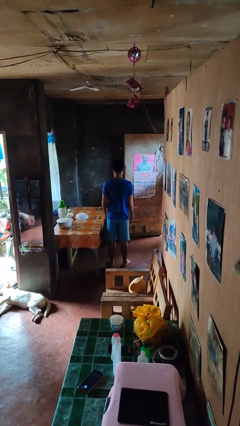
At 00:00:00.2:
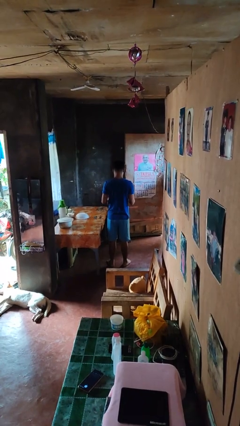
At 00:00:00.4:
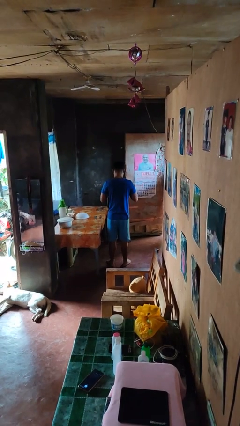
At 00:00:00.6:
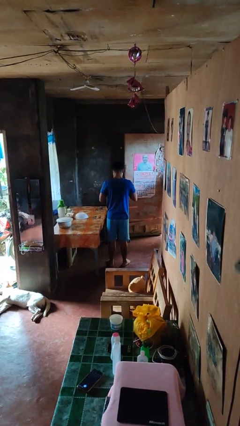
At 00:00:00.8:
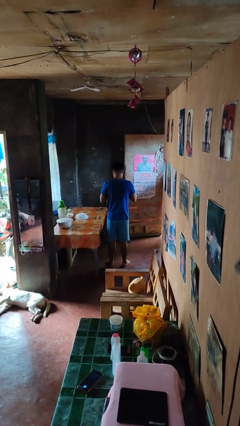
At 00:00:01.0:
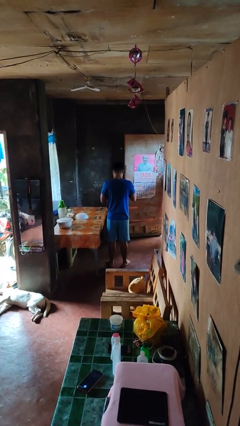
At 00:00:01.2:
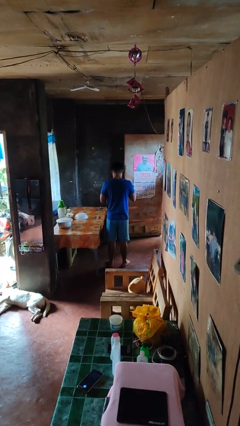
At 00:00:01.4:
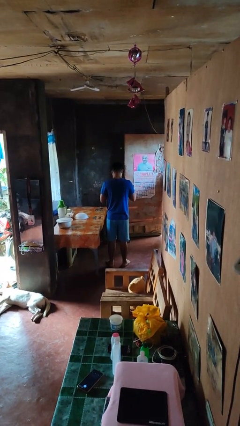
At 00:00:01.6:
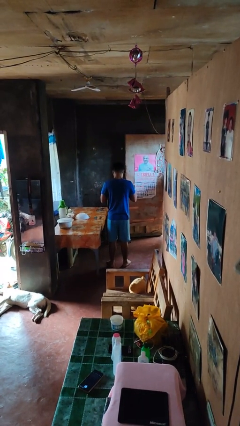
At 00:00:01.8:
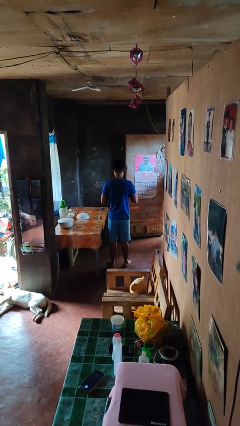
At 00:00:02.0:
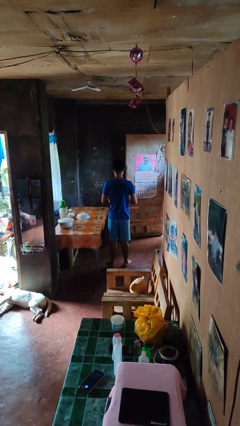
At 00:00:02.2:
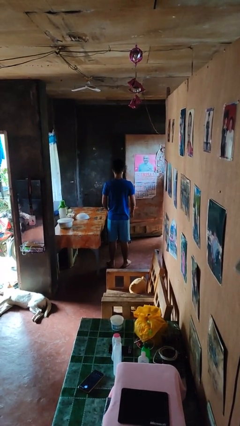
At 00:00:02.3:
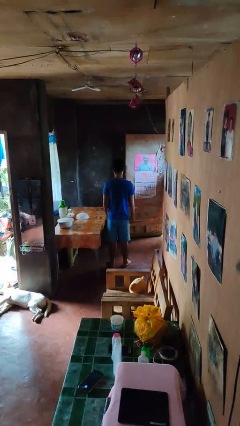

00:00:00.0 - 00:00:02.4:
person unbuttons shirt

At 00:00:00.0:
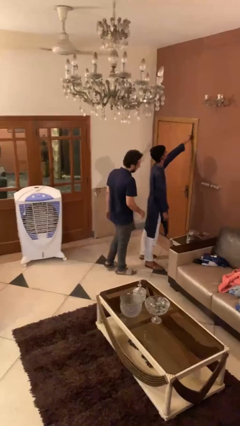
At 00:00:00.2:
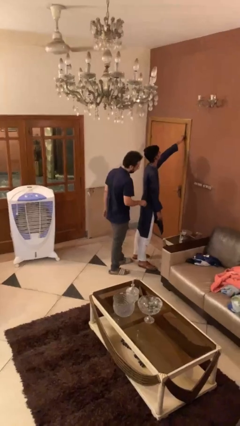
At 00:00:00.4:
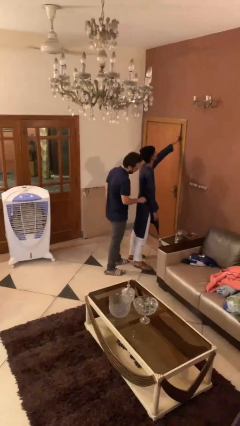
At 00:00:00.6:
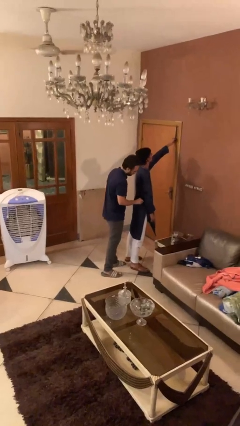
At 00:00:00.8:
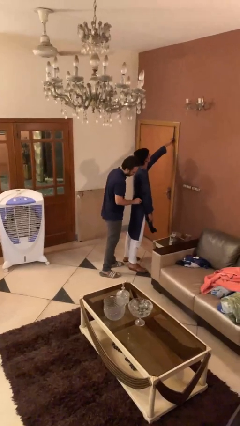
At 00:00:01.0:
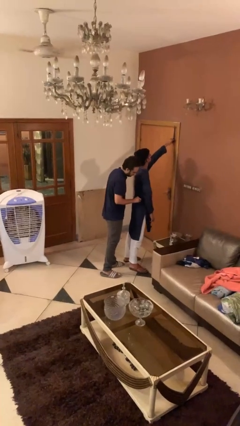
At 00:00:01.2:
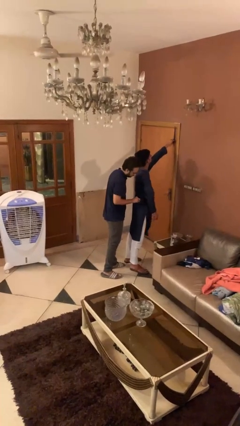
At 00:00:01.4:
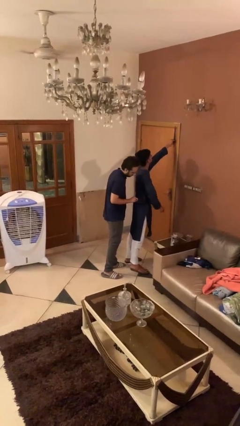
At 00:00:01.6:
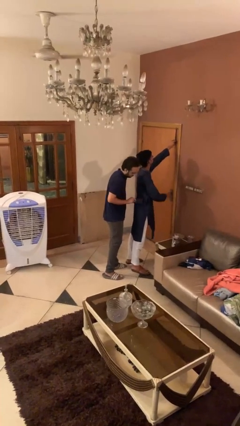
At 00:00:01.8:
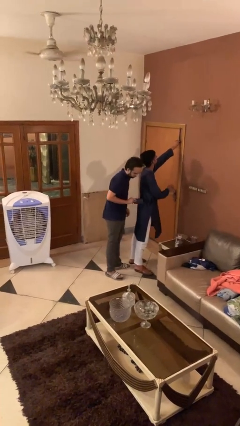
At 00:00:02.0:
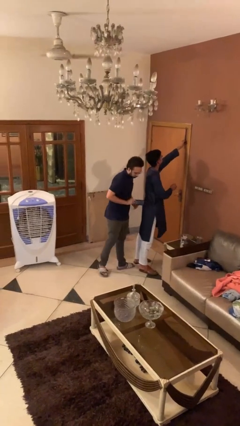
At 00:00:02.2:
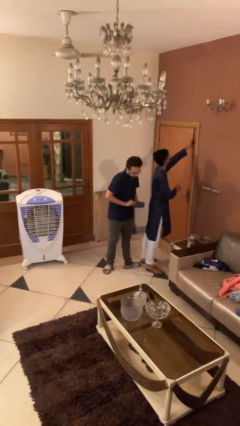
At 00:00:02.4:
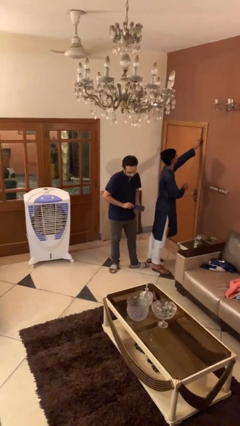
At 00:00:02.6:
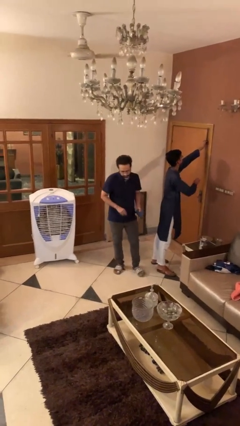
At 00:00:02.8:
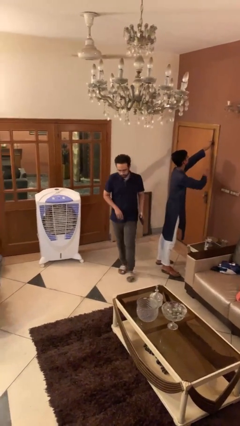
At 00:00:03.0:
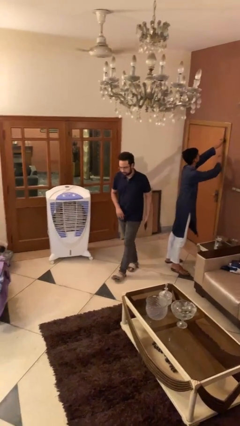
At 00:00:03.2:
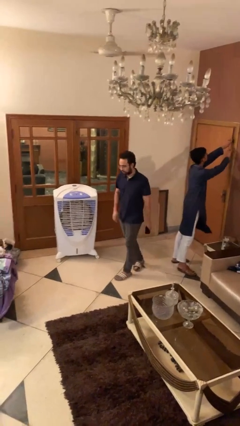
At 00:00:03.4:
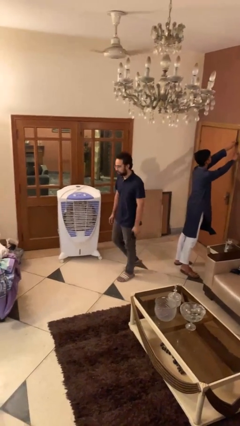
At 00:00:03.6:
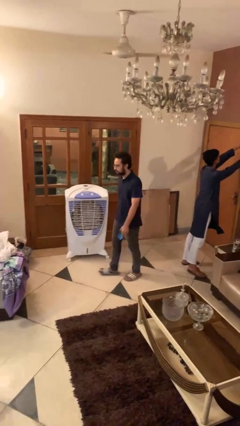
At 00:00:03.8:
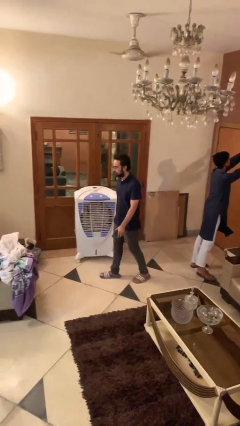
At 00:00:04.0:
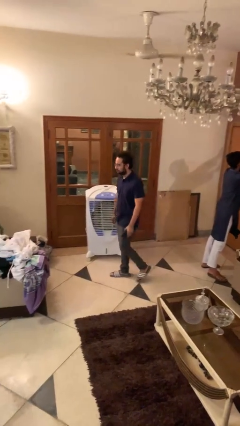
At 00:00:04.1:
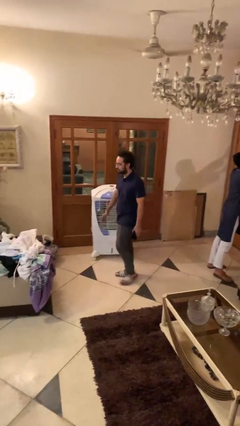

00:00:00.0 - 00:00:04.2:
person steals object from person

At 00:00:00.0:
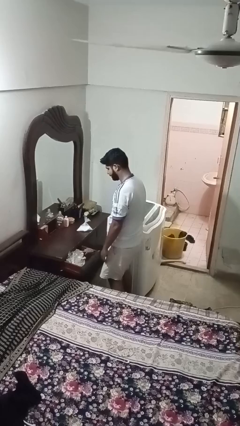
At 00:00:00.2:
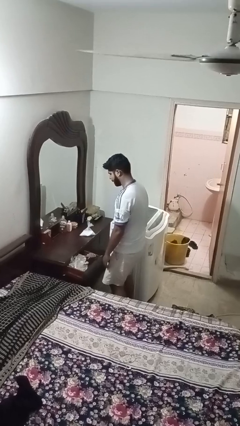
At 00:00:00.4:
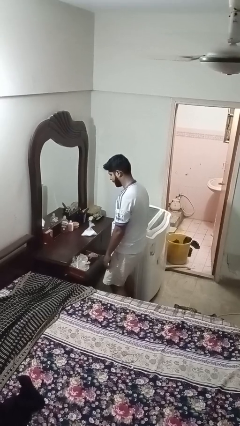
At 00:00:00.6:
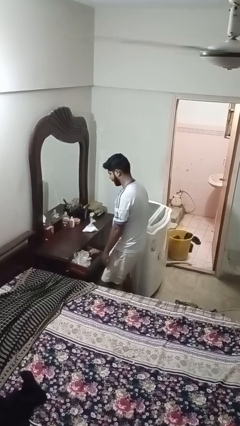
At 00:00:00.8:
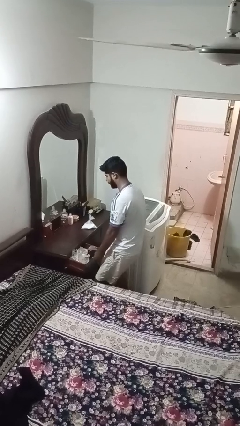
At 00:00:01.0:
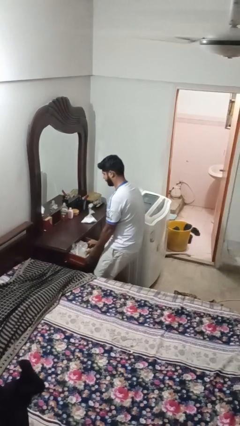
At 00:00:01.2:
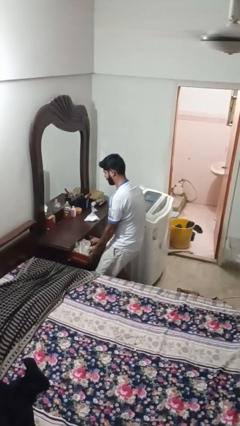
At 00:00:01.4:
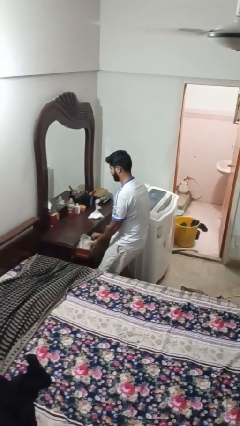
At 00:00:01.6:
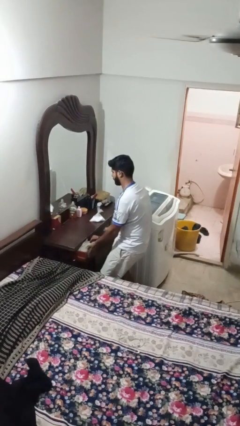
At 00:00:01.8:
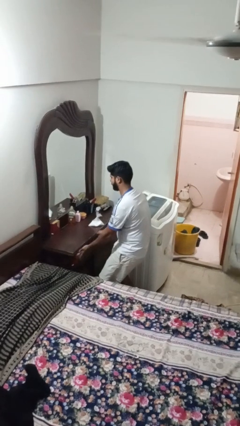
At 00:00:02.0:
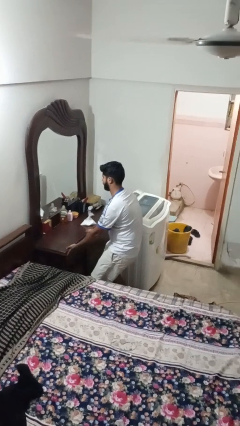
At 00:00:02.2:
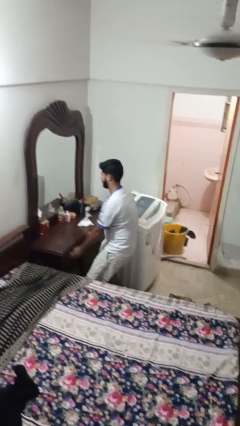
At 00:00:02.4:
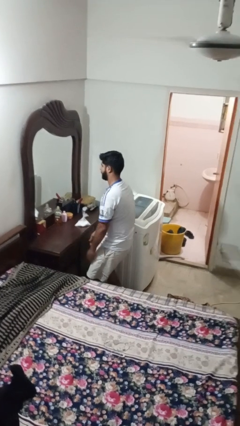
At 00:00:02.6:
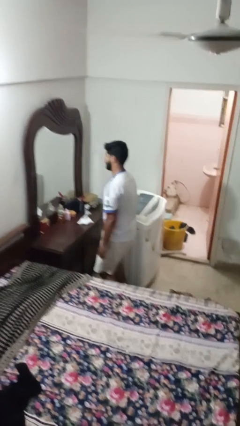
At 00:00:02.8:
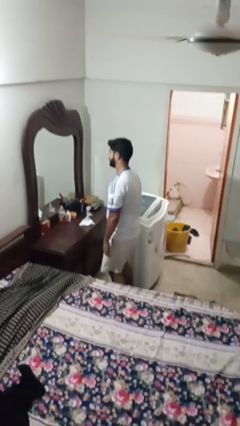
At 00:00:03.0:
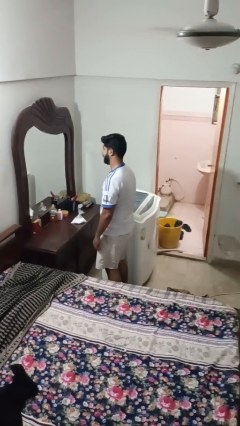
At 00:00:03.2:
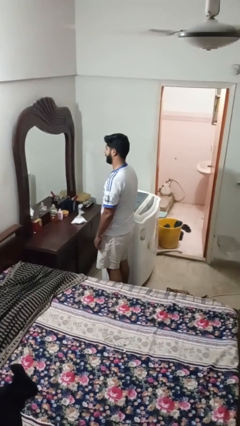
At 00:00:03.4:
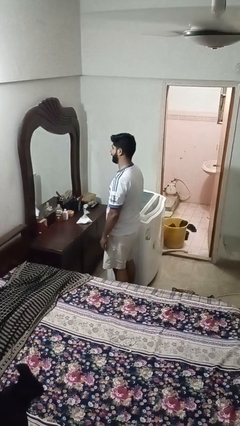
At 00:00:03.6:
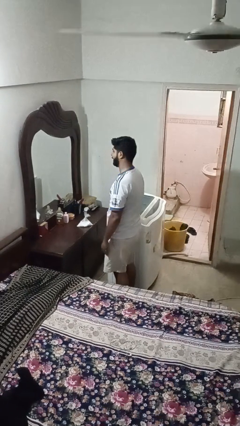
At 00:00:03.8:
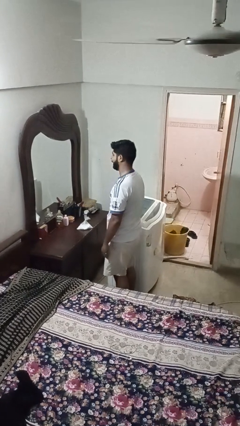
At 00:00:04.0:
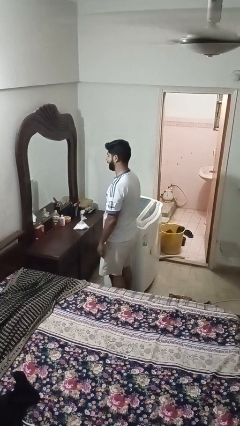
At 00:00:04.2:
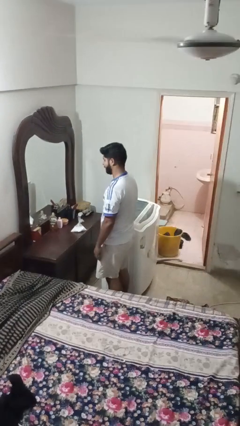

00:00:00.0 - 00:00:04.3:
person closes dresser drawer

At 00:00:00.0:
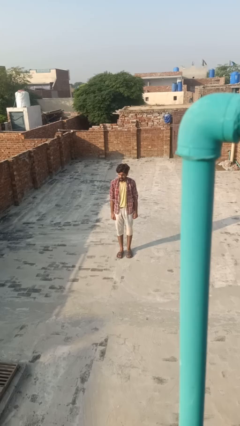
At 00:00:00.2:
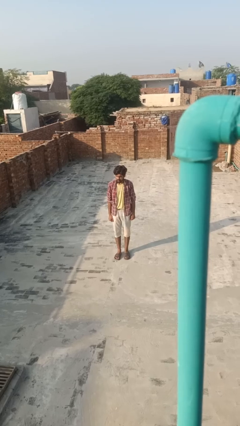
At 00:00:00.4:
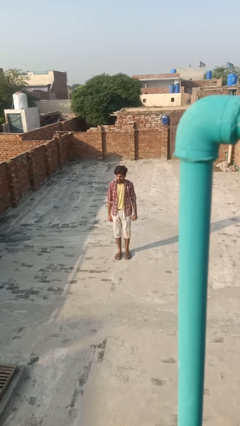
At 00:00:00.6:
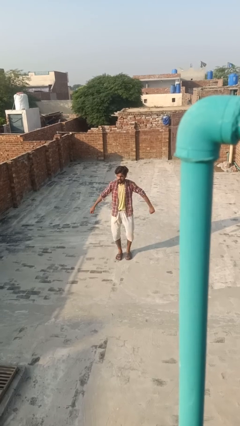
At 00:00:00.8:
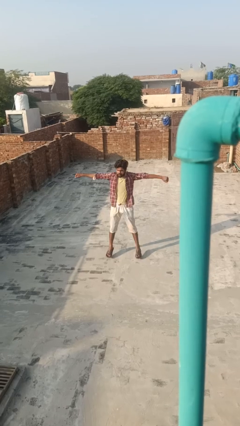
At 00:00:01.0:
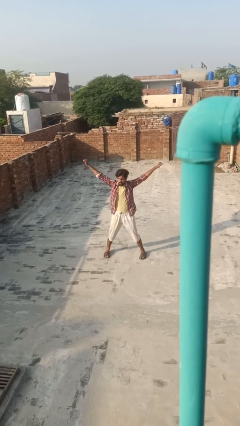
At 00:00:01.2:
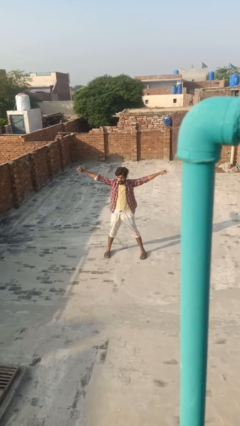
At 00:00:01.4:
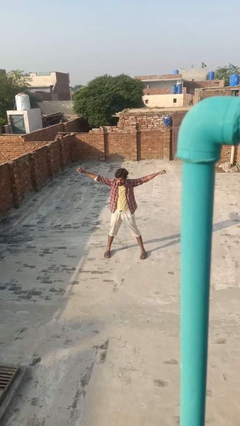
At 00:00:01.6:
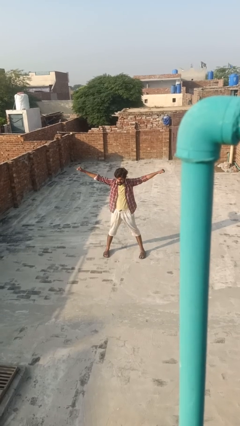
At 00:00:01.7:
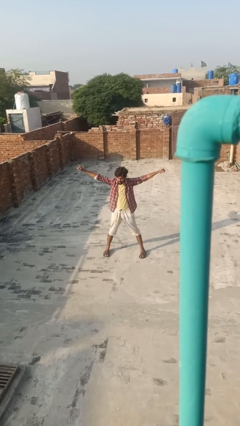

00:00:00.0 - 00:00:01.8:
person exercises with jumping jacks

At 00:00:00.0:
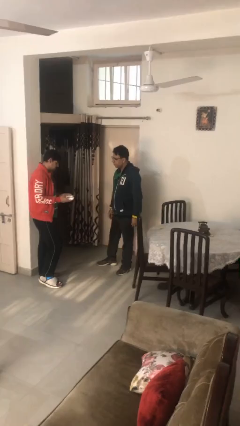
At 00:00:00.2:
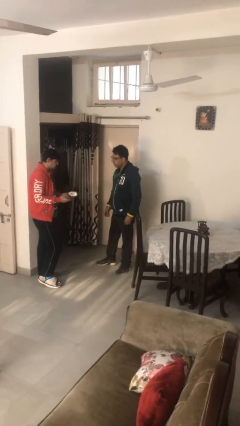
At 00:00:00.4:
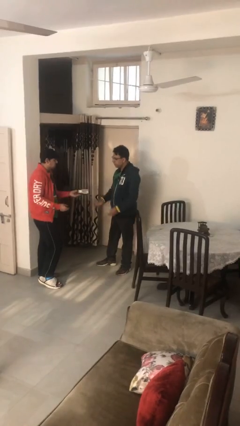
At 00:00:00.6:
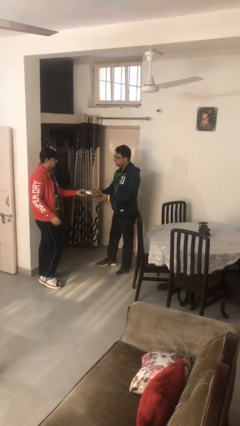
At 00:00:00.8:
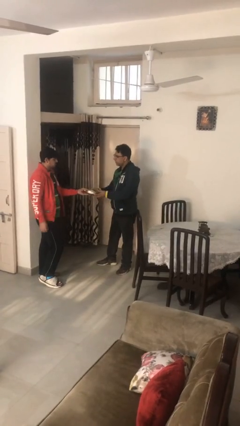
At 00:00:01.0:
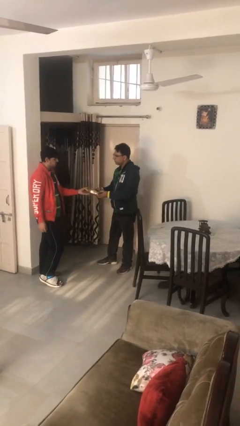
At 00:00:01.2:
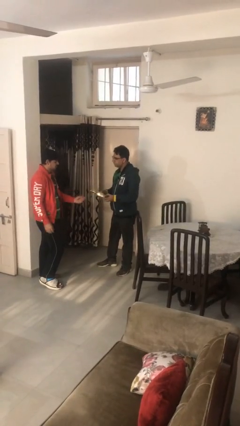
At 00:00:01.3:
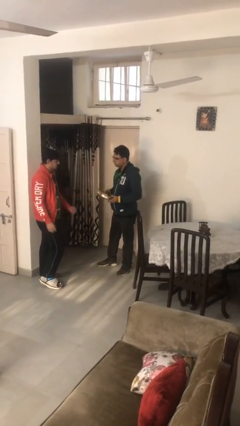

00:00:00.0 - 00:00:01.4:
person transfers object to person

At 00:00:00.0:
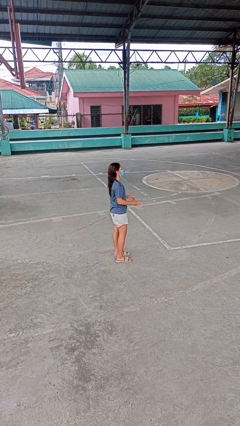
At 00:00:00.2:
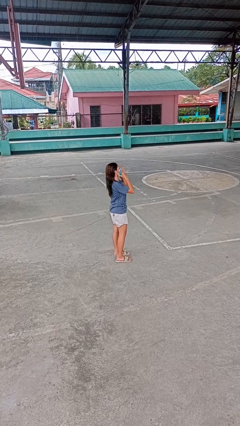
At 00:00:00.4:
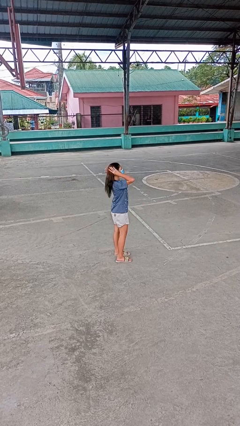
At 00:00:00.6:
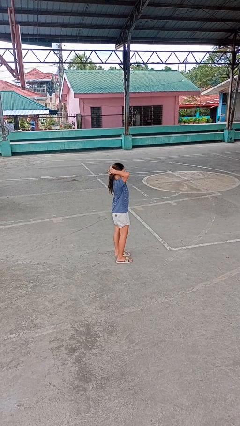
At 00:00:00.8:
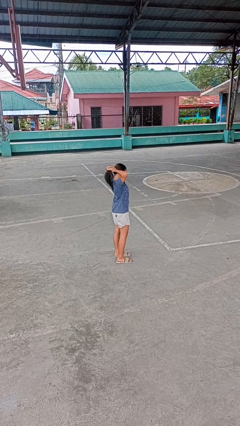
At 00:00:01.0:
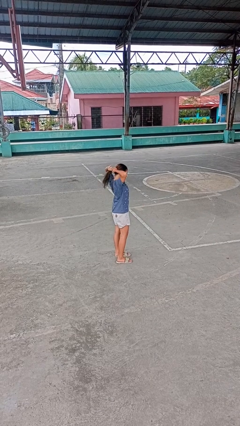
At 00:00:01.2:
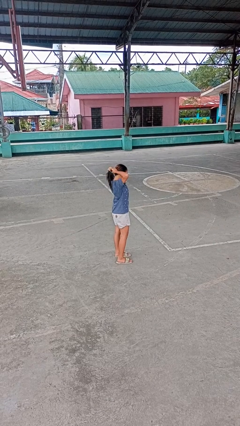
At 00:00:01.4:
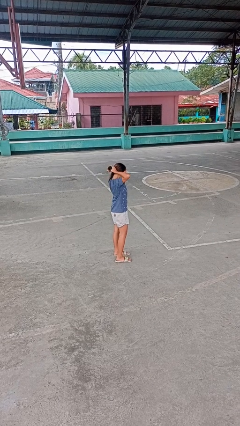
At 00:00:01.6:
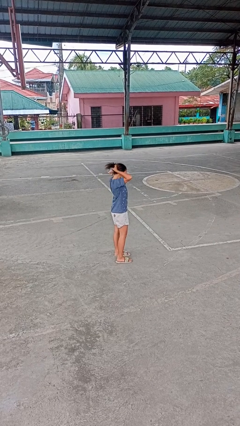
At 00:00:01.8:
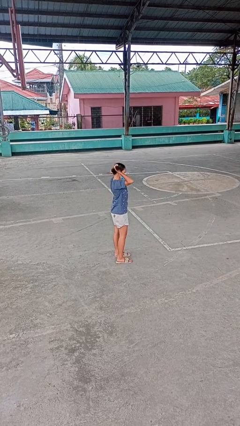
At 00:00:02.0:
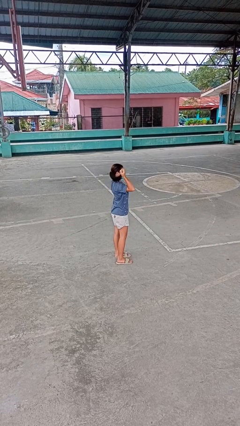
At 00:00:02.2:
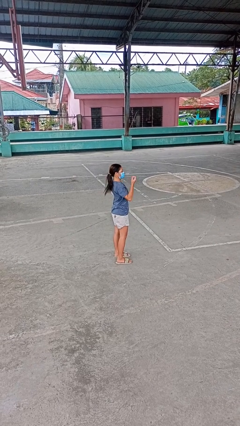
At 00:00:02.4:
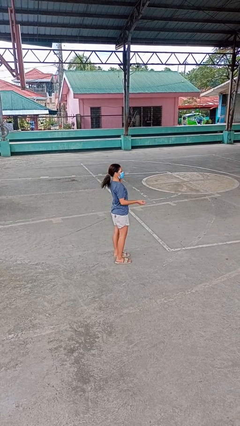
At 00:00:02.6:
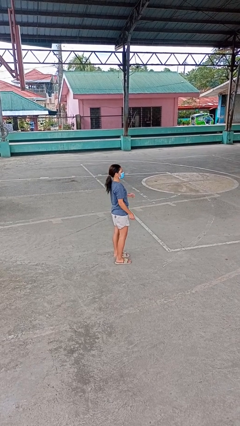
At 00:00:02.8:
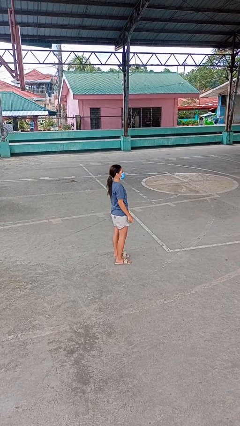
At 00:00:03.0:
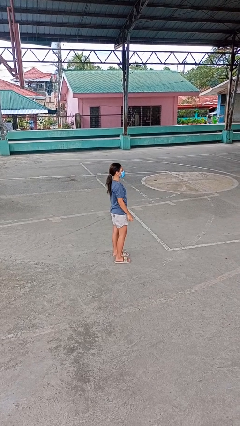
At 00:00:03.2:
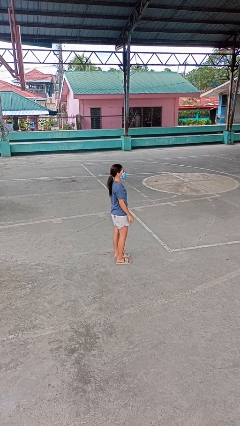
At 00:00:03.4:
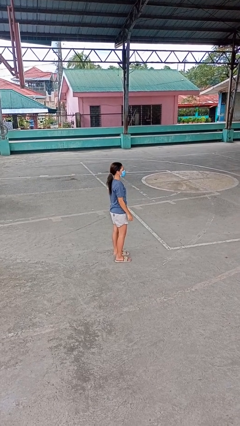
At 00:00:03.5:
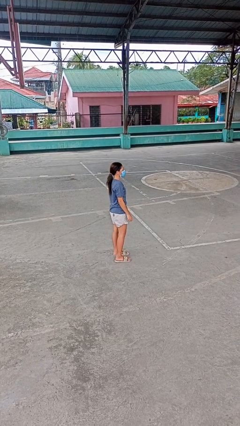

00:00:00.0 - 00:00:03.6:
person puts hair in ponytail
